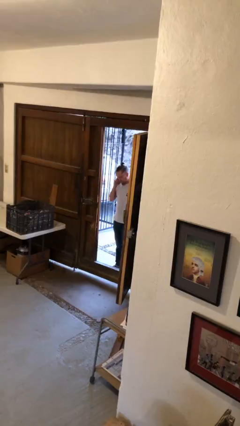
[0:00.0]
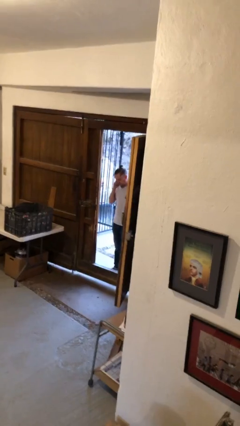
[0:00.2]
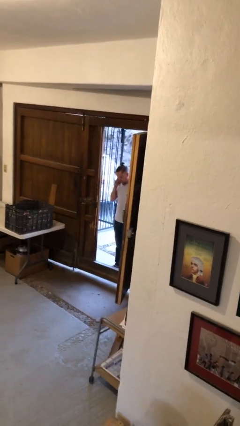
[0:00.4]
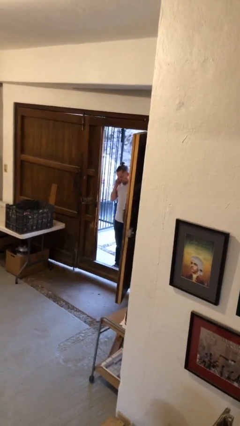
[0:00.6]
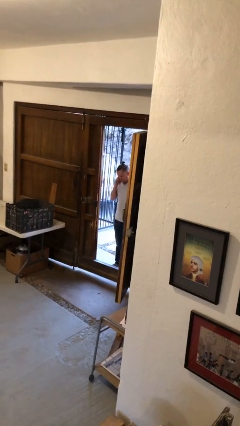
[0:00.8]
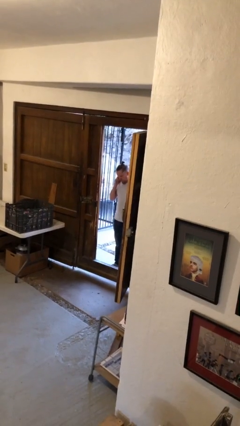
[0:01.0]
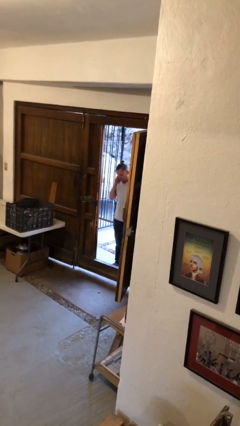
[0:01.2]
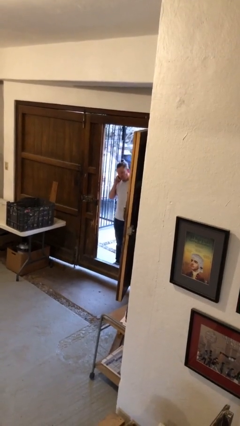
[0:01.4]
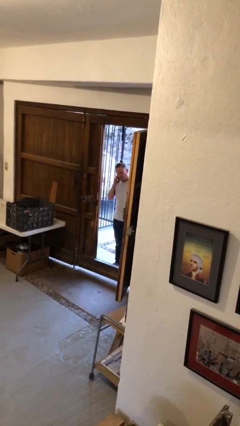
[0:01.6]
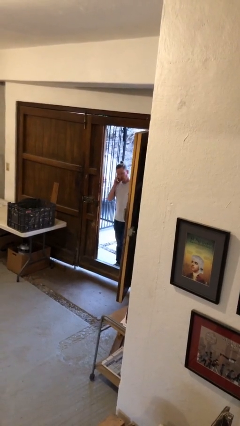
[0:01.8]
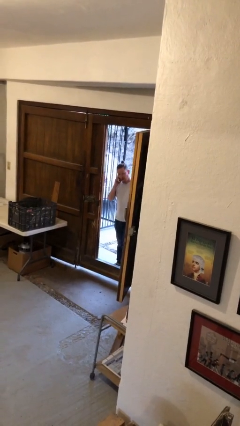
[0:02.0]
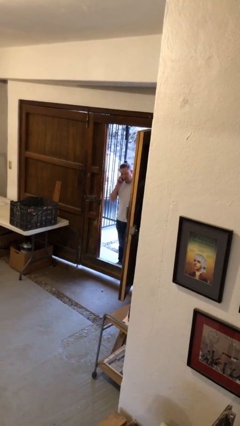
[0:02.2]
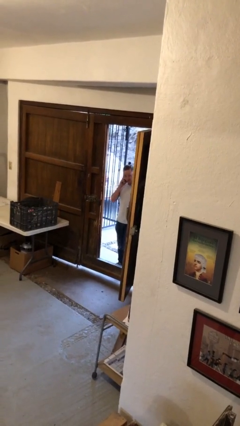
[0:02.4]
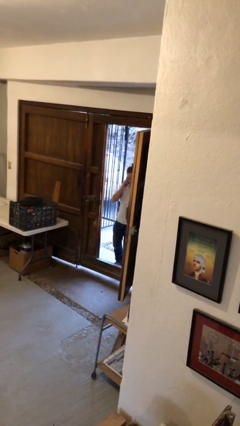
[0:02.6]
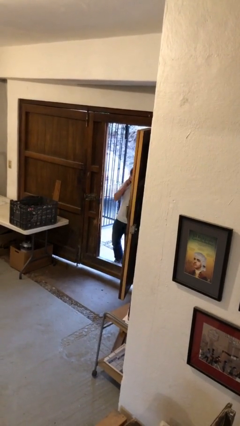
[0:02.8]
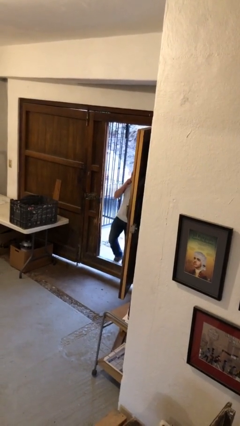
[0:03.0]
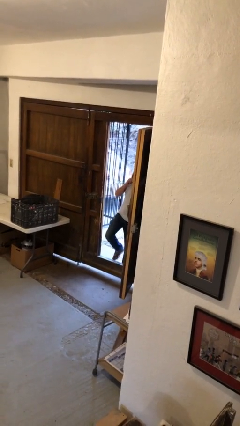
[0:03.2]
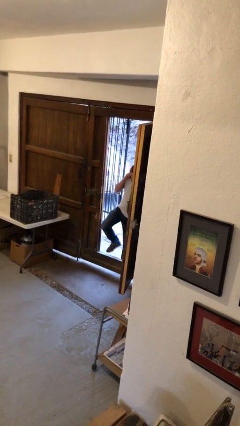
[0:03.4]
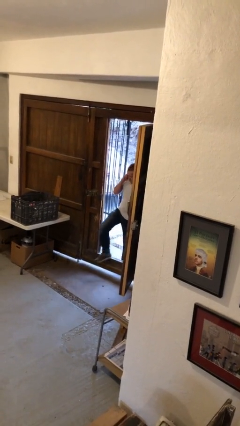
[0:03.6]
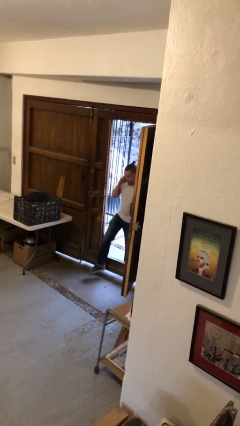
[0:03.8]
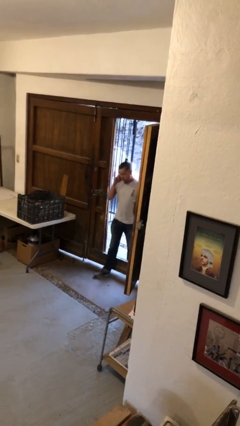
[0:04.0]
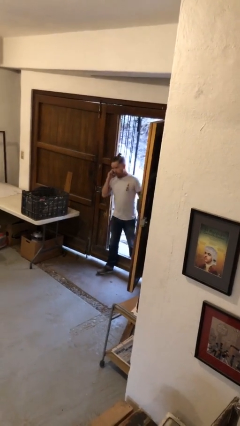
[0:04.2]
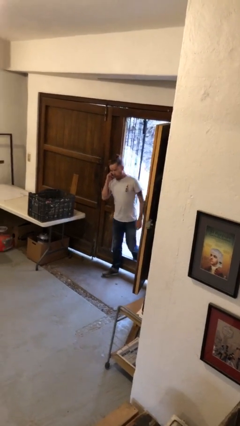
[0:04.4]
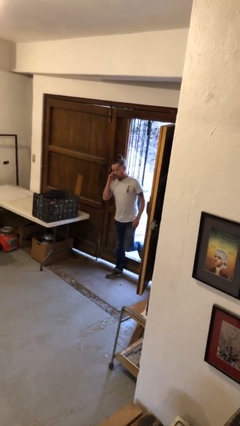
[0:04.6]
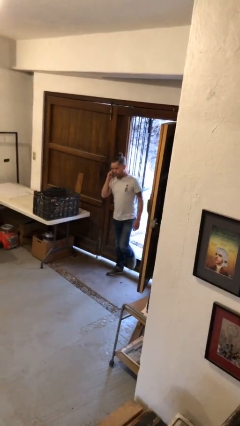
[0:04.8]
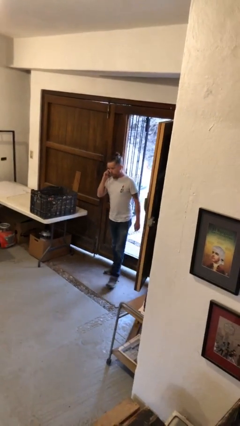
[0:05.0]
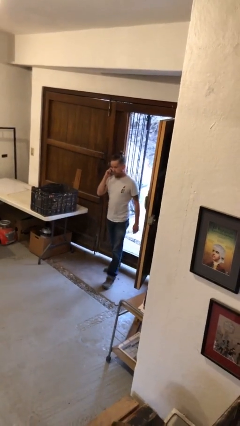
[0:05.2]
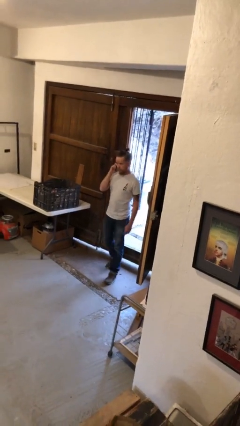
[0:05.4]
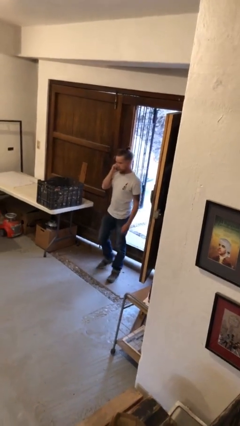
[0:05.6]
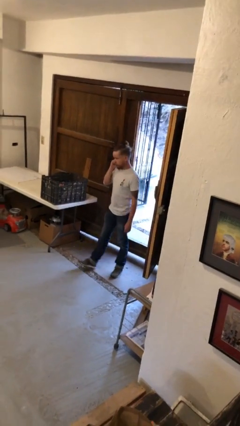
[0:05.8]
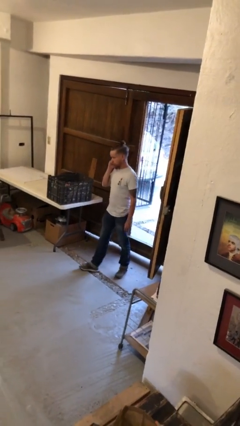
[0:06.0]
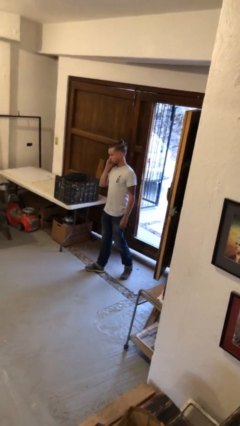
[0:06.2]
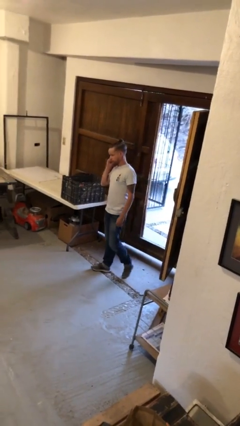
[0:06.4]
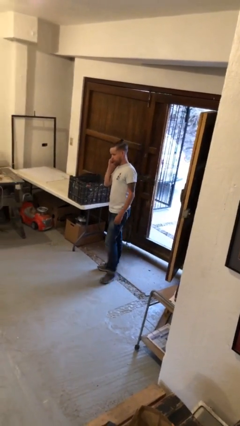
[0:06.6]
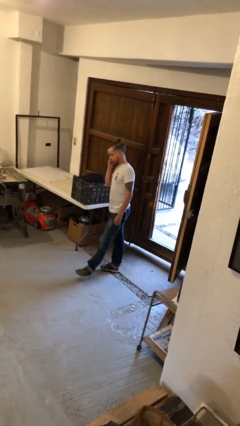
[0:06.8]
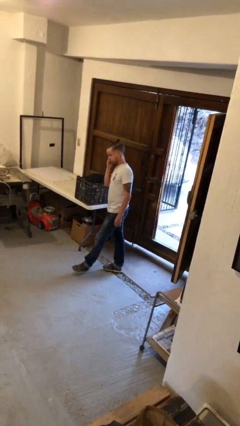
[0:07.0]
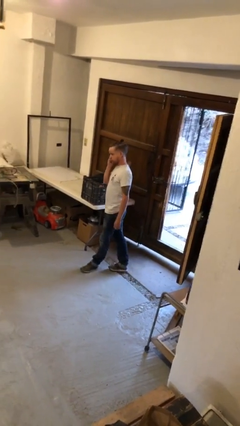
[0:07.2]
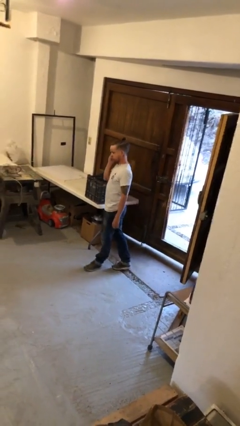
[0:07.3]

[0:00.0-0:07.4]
person enters scene through structure

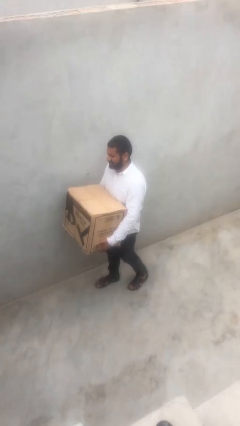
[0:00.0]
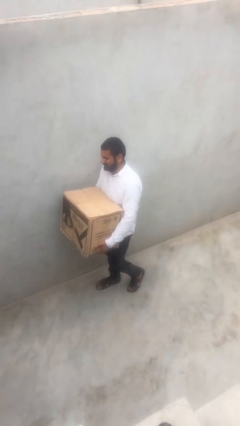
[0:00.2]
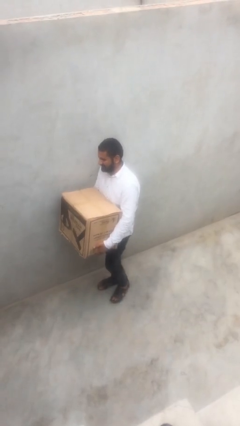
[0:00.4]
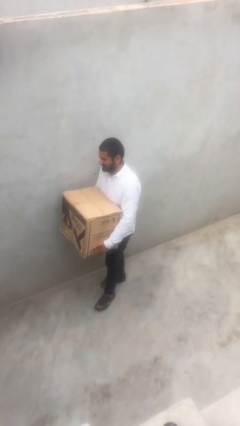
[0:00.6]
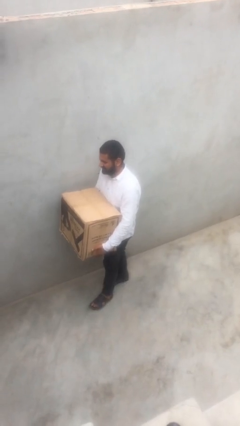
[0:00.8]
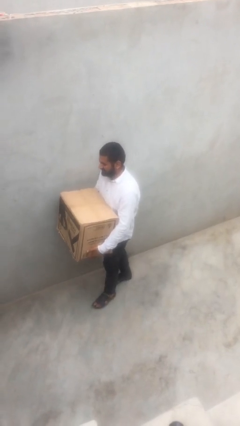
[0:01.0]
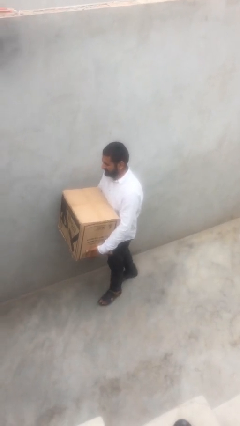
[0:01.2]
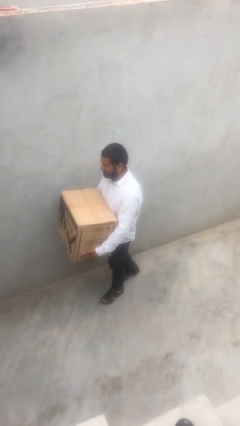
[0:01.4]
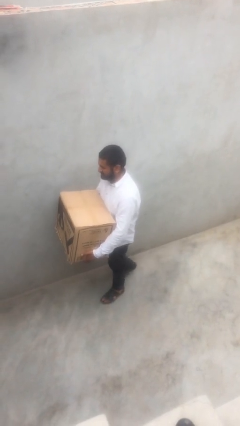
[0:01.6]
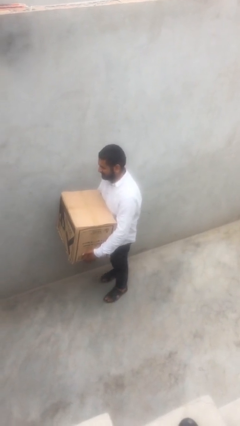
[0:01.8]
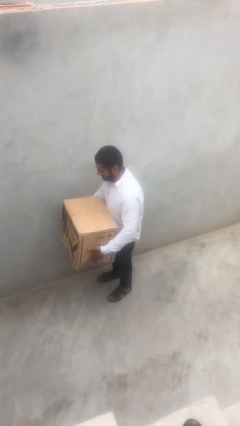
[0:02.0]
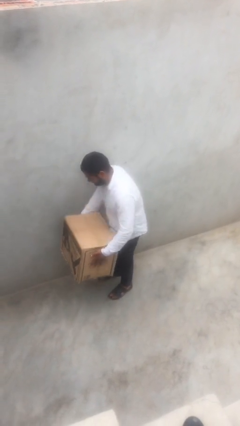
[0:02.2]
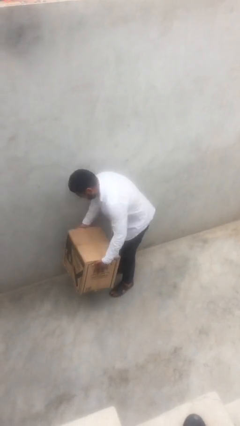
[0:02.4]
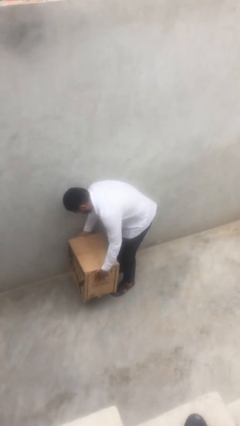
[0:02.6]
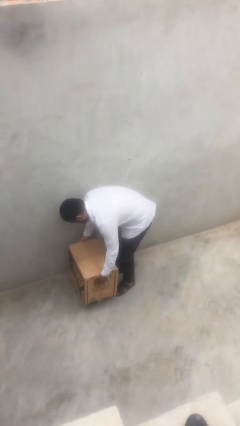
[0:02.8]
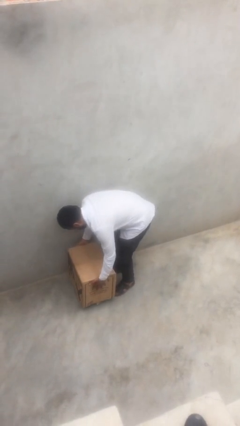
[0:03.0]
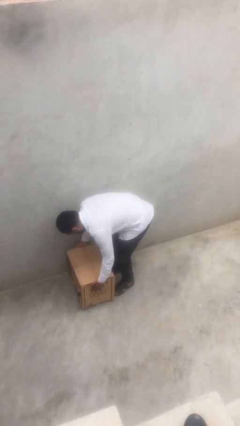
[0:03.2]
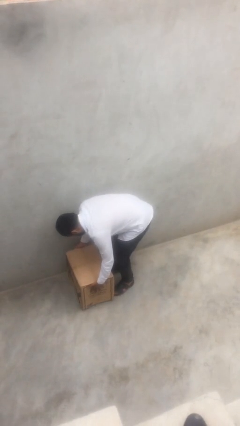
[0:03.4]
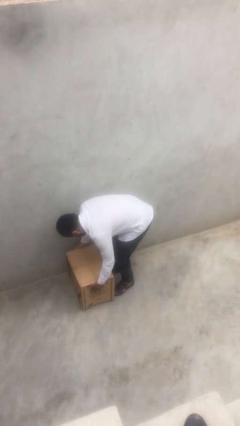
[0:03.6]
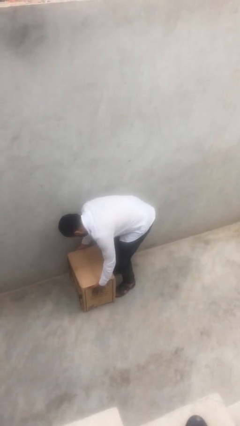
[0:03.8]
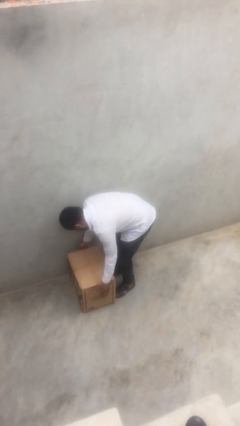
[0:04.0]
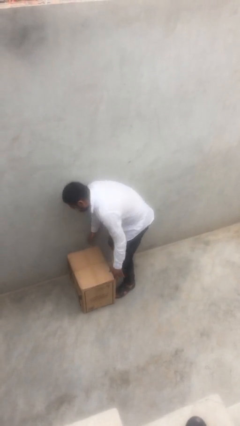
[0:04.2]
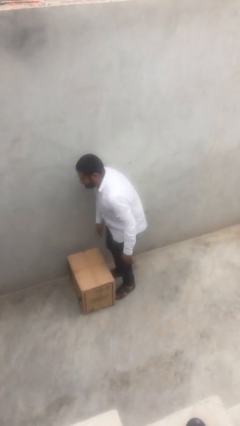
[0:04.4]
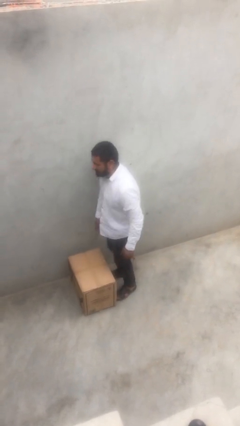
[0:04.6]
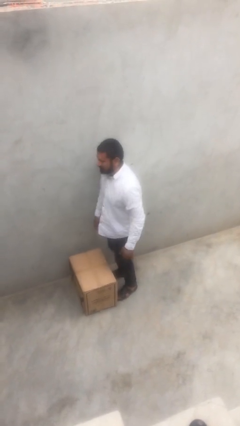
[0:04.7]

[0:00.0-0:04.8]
person puts down object on floor

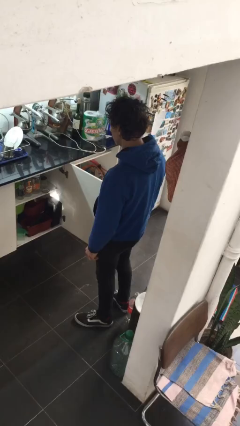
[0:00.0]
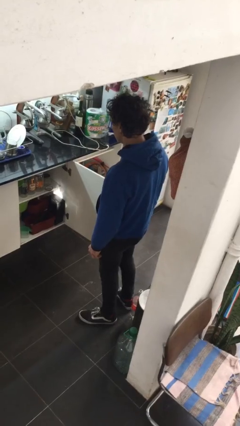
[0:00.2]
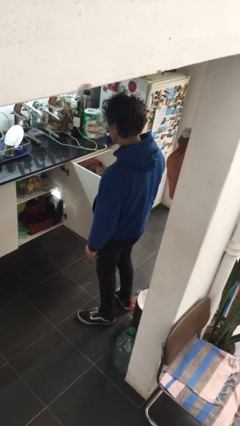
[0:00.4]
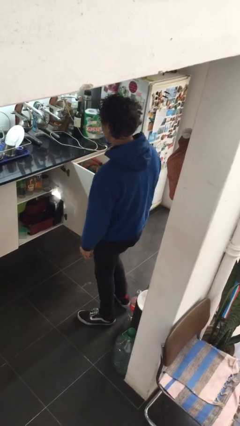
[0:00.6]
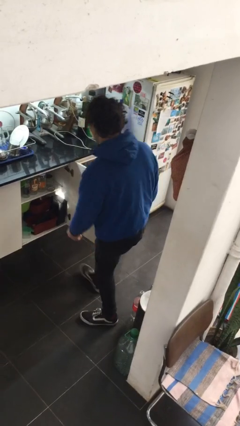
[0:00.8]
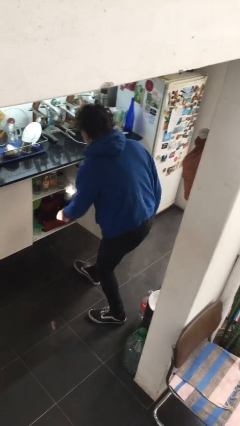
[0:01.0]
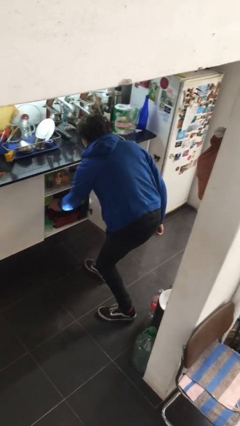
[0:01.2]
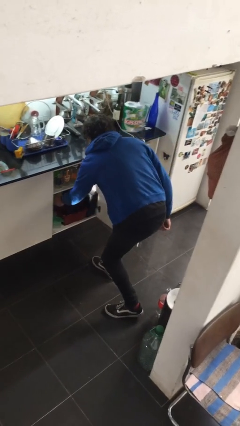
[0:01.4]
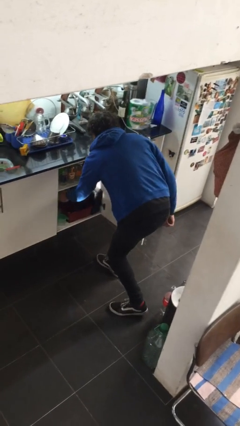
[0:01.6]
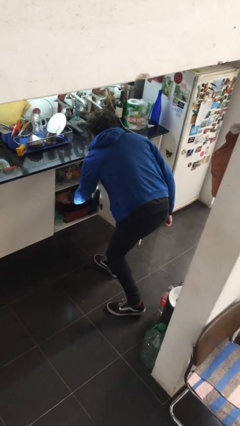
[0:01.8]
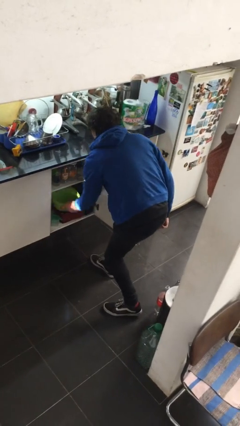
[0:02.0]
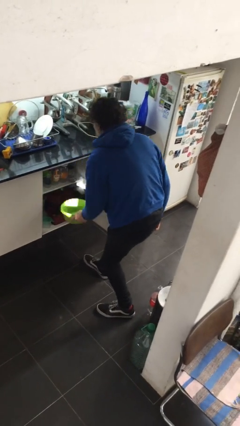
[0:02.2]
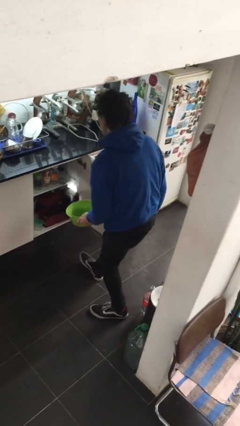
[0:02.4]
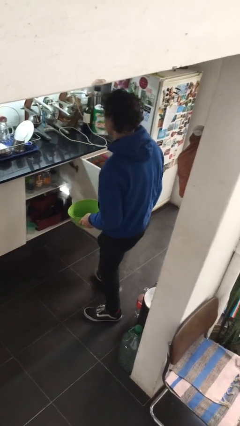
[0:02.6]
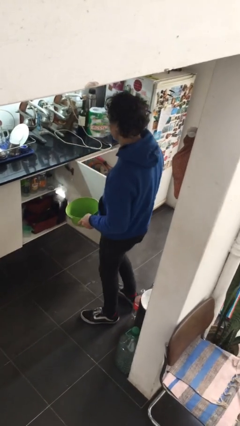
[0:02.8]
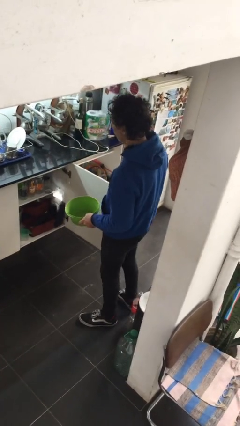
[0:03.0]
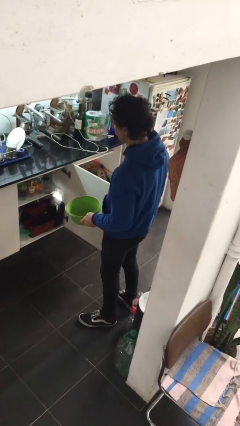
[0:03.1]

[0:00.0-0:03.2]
person picks up object from cabinet

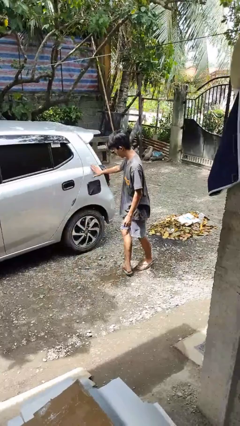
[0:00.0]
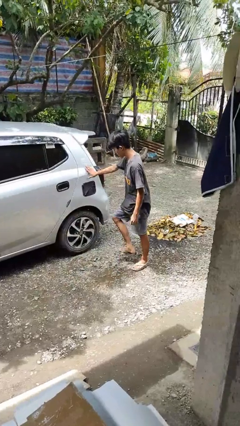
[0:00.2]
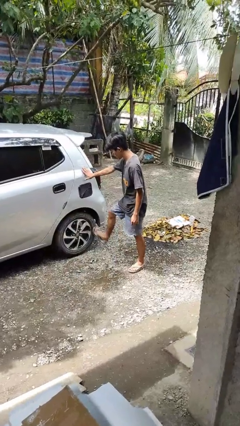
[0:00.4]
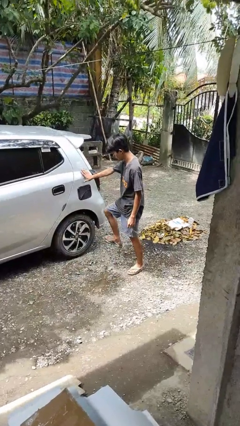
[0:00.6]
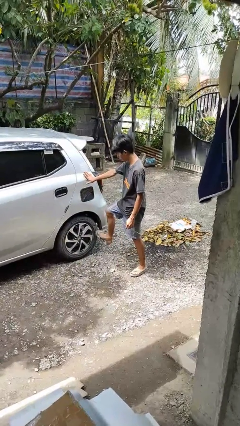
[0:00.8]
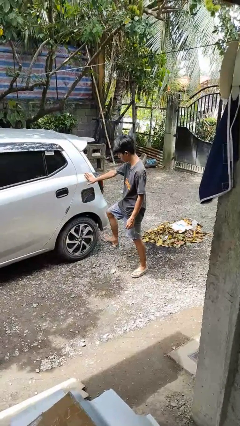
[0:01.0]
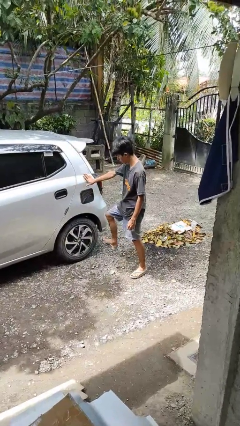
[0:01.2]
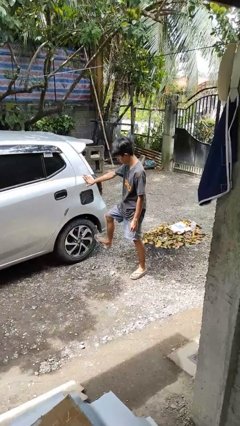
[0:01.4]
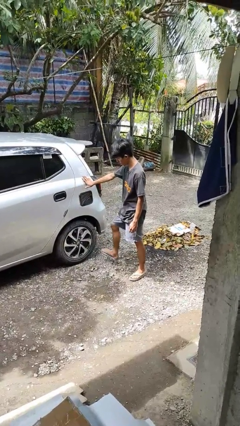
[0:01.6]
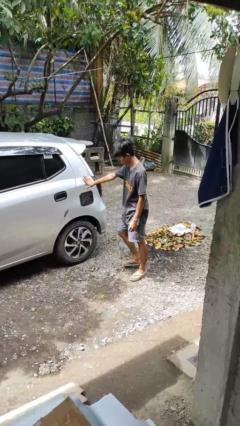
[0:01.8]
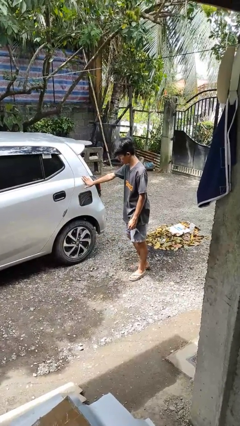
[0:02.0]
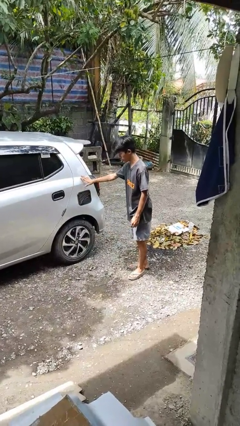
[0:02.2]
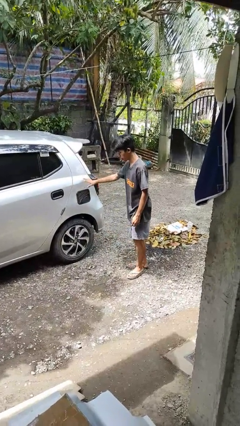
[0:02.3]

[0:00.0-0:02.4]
person kicks car tires
